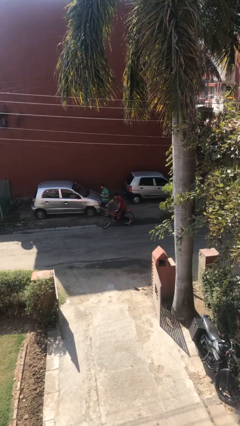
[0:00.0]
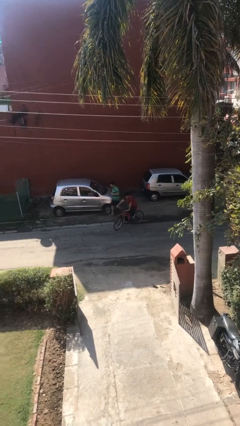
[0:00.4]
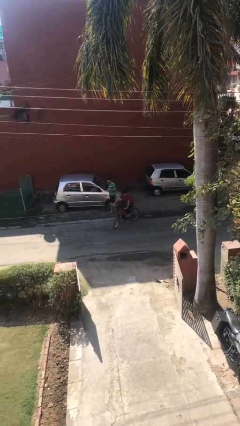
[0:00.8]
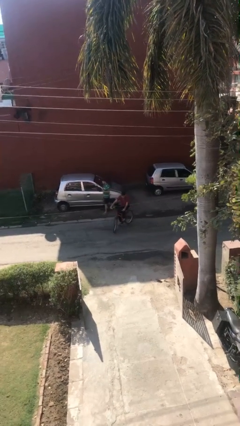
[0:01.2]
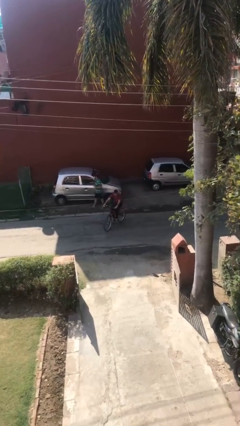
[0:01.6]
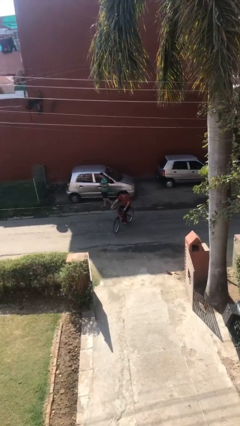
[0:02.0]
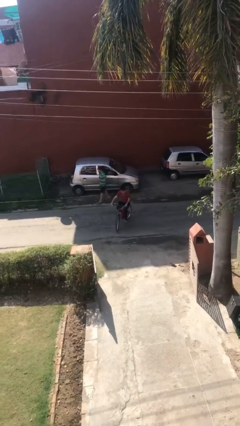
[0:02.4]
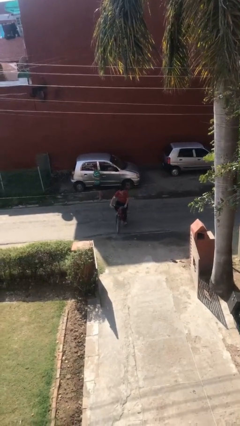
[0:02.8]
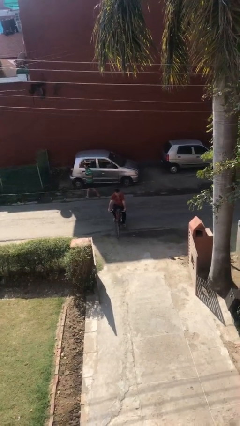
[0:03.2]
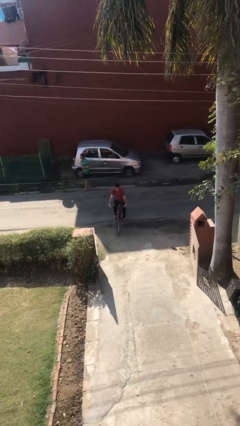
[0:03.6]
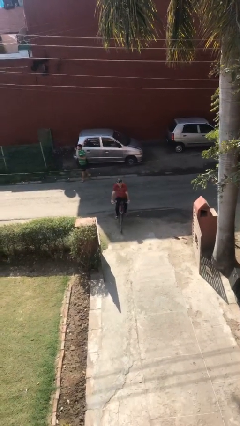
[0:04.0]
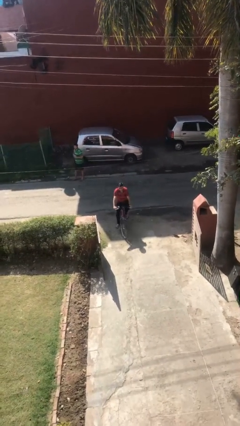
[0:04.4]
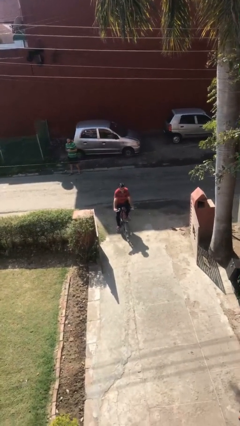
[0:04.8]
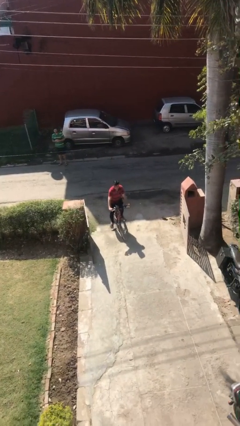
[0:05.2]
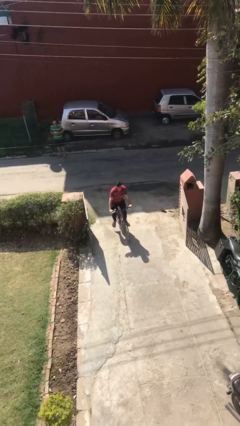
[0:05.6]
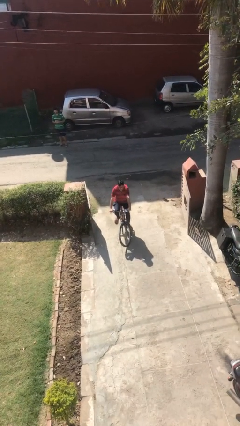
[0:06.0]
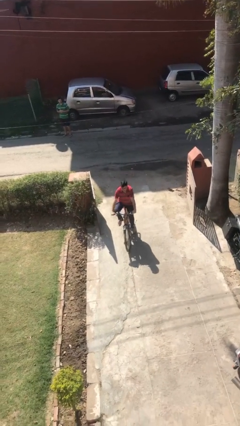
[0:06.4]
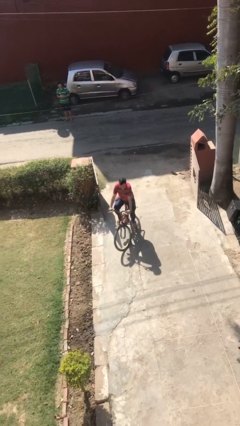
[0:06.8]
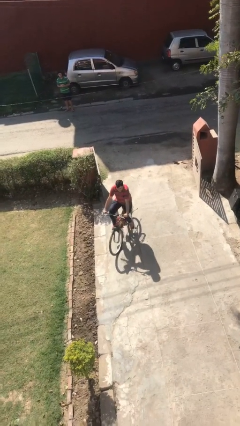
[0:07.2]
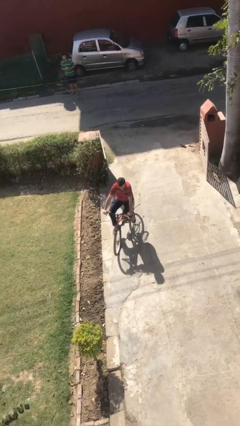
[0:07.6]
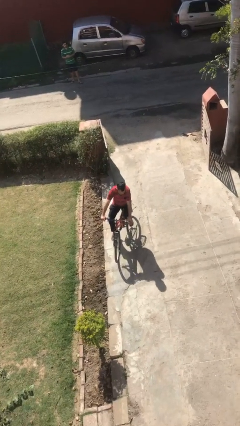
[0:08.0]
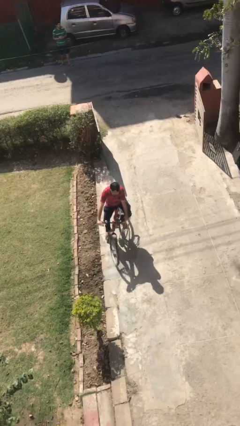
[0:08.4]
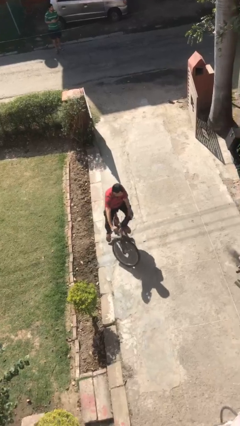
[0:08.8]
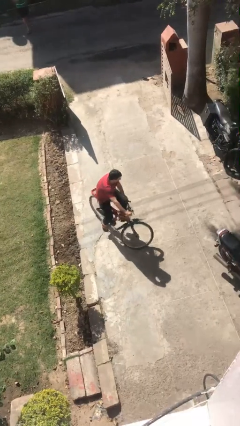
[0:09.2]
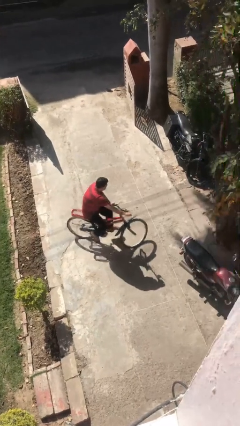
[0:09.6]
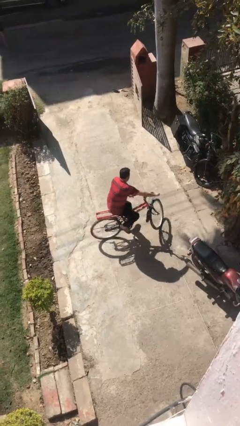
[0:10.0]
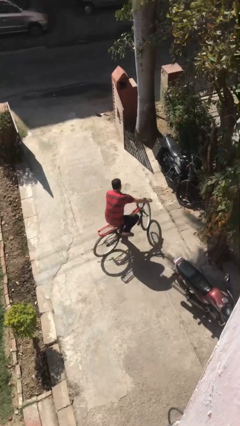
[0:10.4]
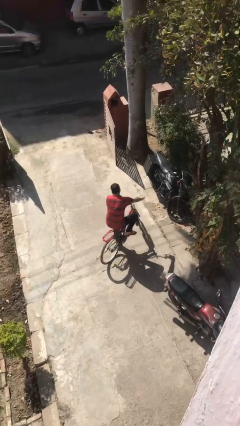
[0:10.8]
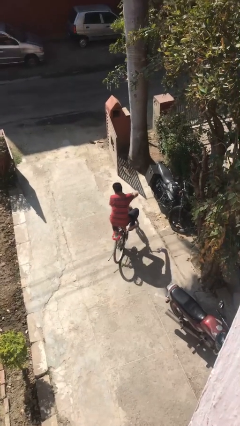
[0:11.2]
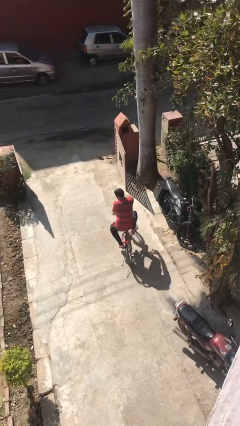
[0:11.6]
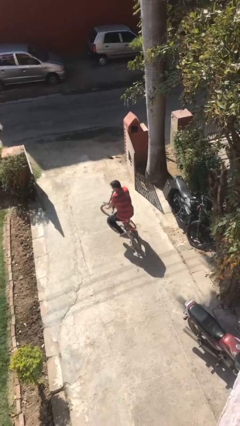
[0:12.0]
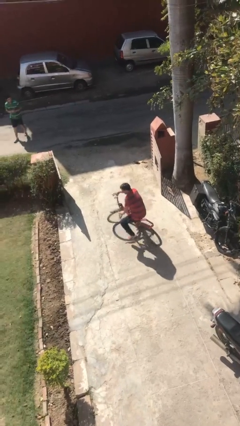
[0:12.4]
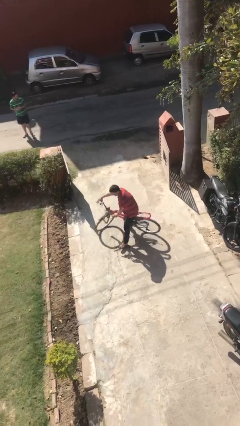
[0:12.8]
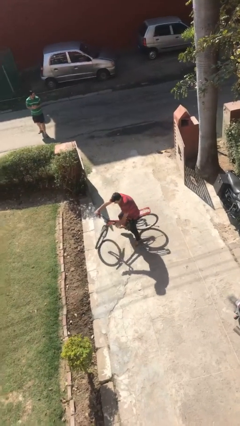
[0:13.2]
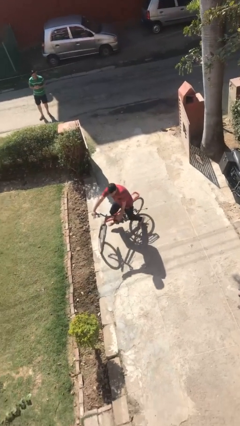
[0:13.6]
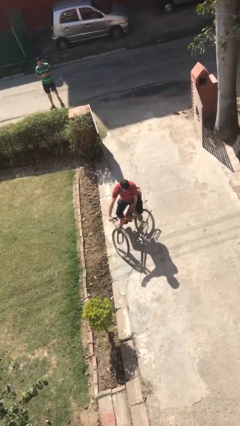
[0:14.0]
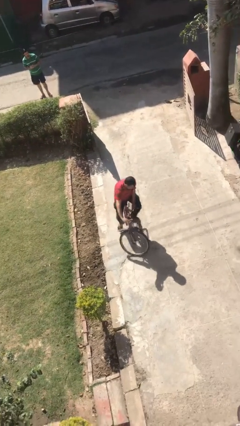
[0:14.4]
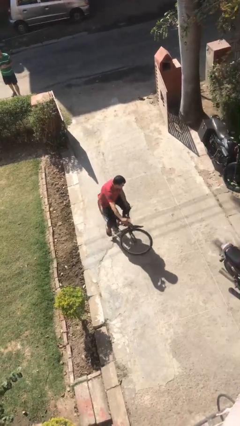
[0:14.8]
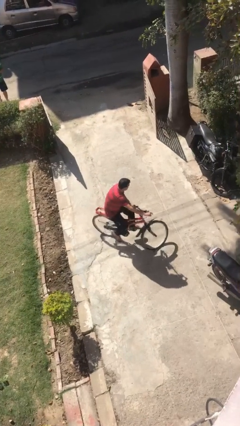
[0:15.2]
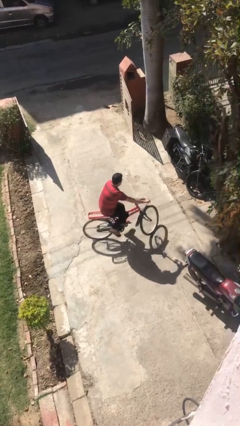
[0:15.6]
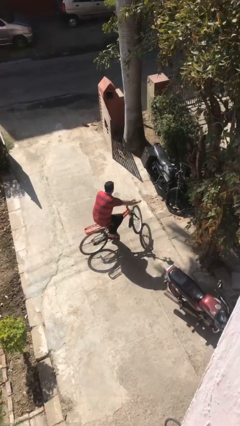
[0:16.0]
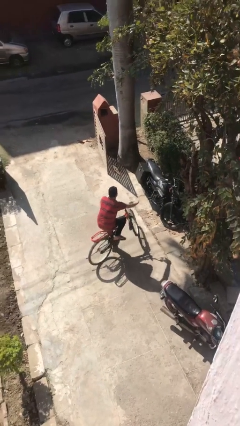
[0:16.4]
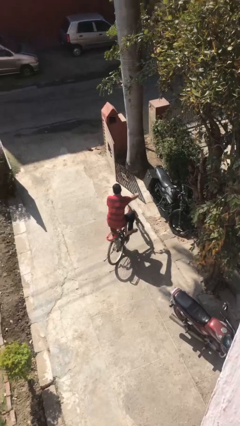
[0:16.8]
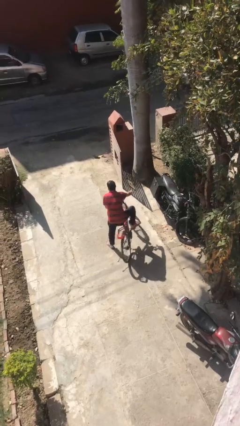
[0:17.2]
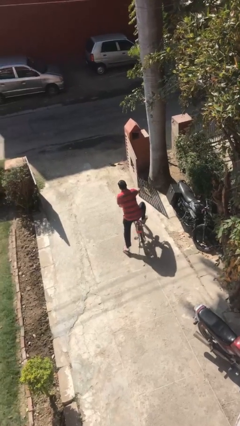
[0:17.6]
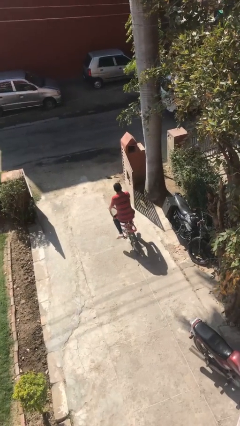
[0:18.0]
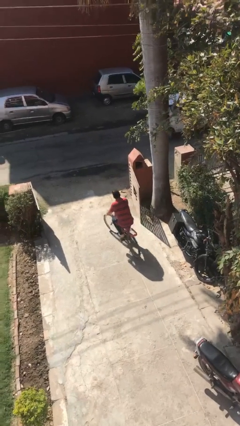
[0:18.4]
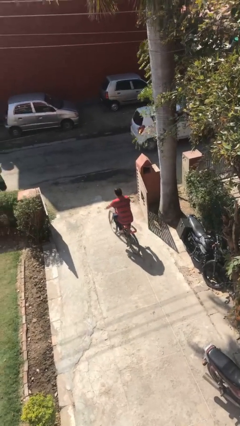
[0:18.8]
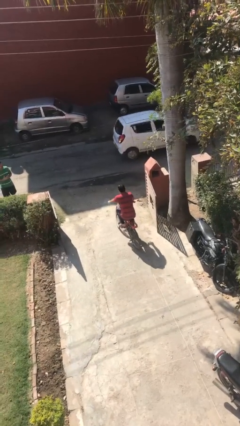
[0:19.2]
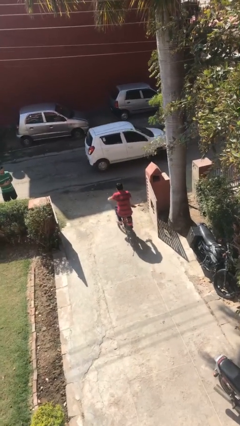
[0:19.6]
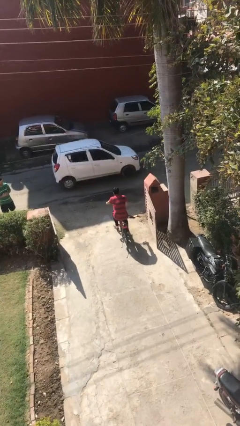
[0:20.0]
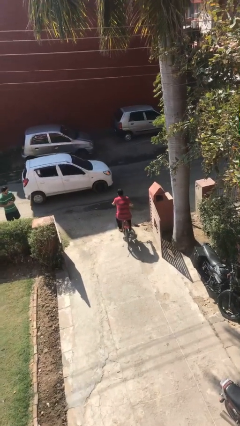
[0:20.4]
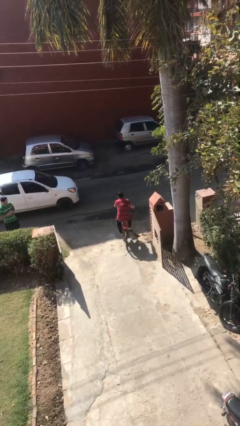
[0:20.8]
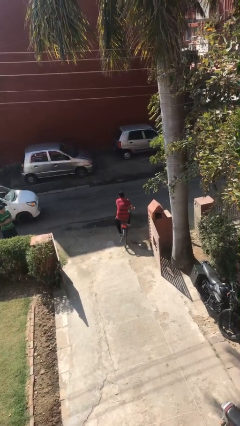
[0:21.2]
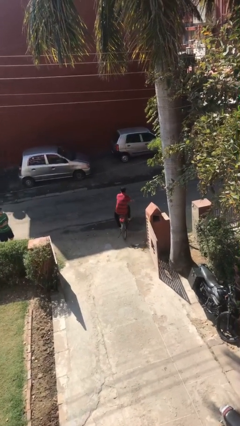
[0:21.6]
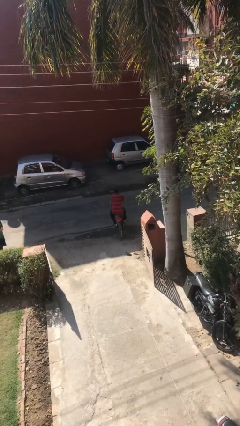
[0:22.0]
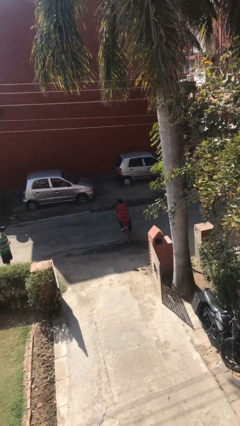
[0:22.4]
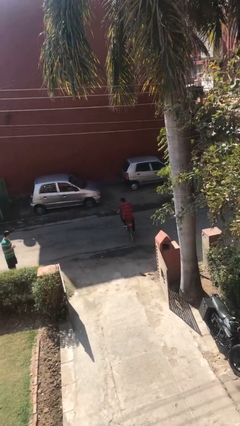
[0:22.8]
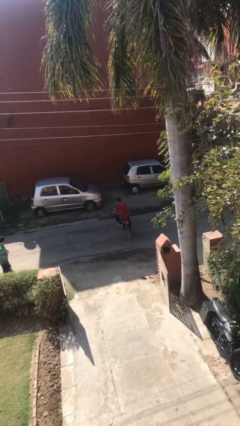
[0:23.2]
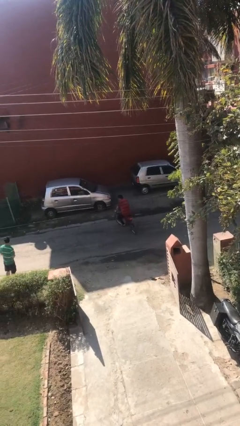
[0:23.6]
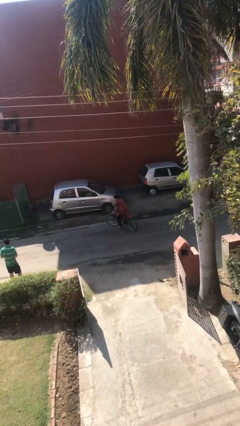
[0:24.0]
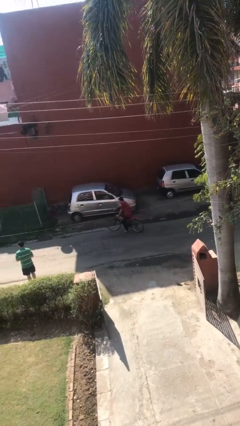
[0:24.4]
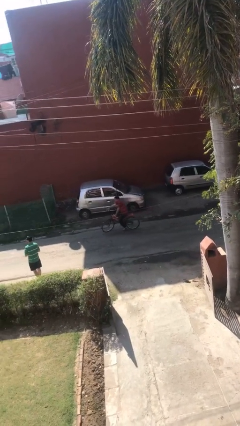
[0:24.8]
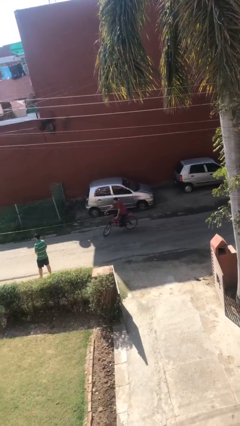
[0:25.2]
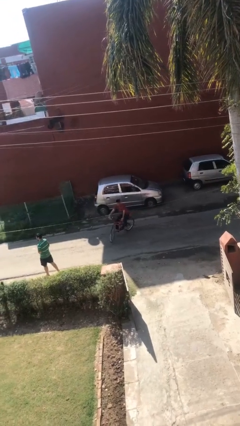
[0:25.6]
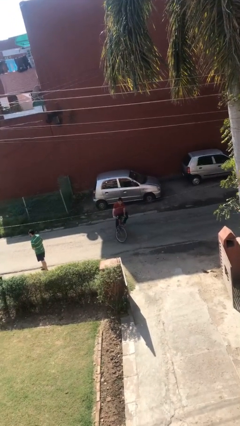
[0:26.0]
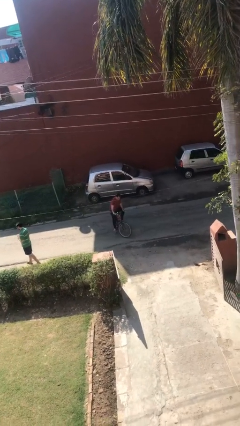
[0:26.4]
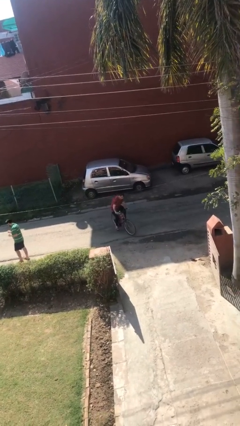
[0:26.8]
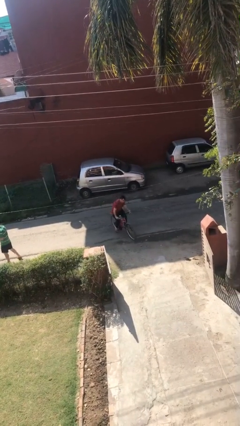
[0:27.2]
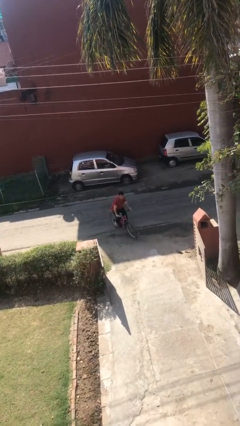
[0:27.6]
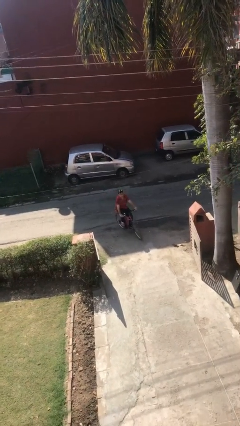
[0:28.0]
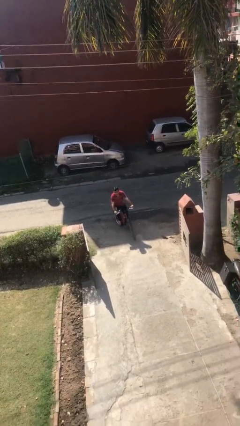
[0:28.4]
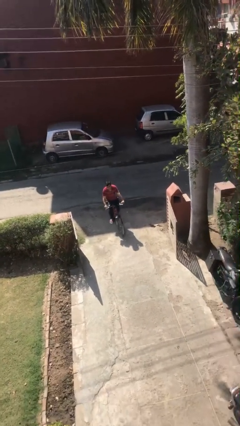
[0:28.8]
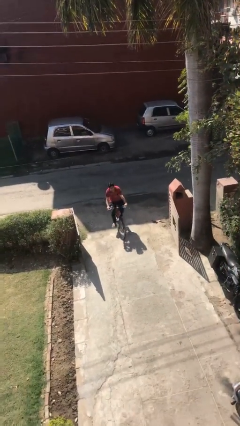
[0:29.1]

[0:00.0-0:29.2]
person rides bicycle

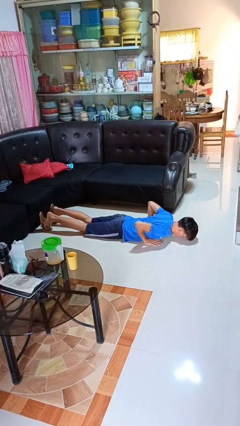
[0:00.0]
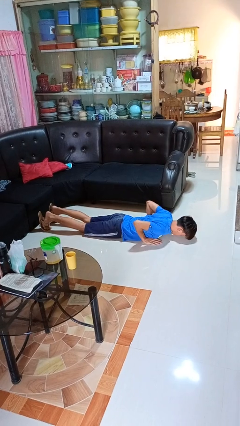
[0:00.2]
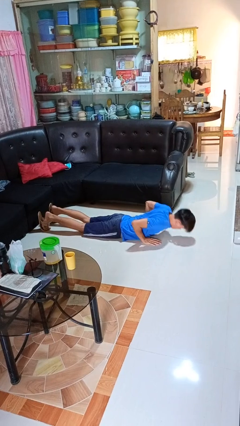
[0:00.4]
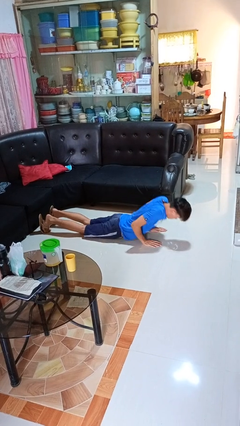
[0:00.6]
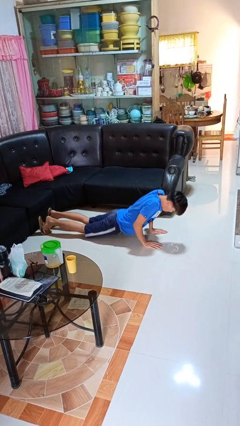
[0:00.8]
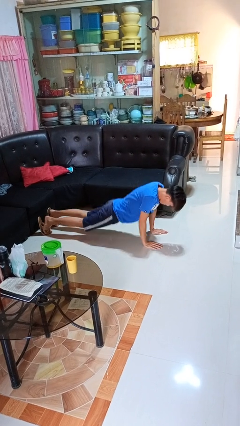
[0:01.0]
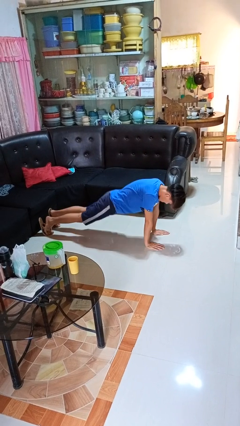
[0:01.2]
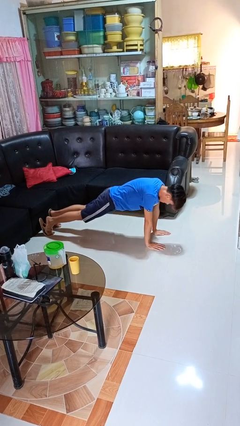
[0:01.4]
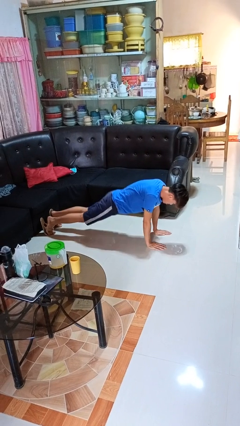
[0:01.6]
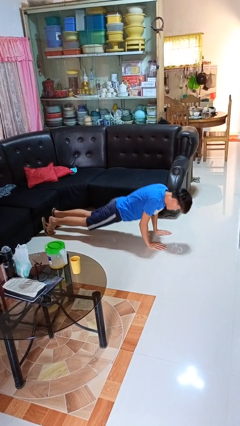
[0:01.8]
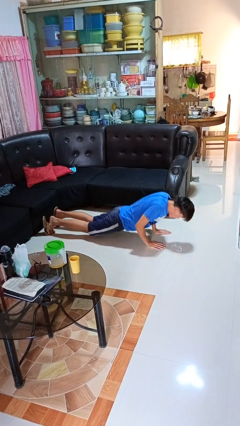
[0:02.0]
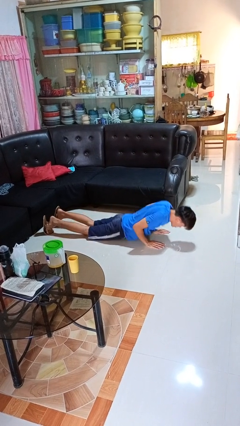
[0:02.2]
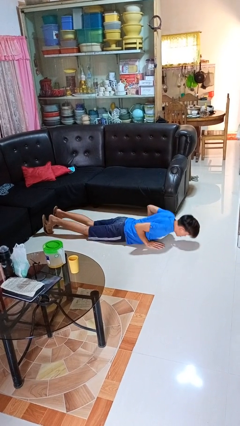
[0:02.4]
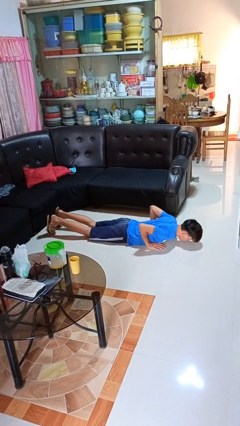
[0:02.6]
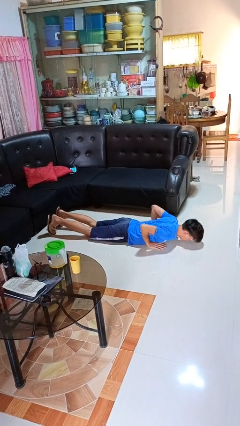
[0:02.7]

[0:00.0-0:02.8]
person exercises with pushup

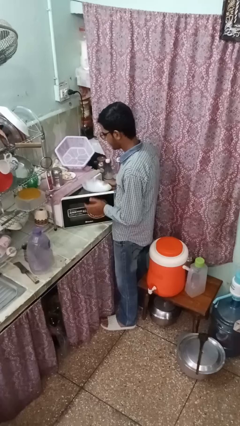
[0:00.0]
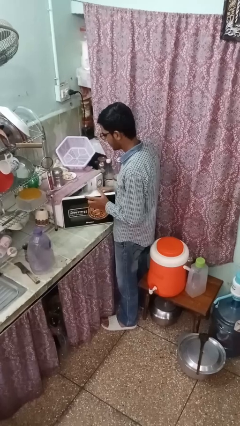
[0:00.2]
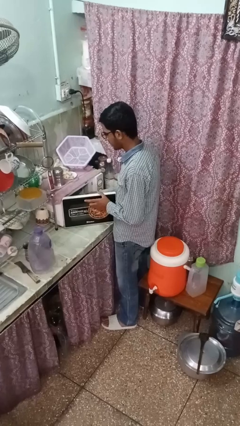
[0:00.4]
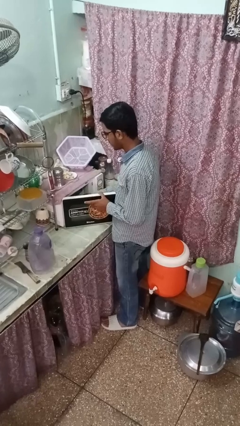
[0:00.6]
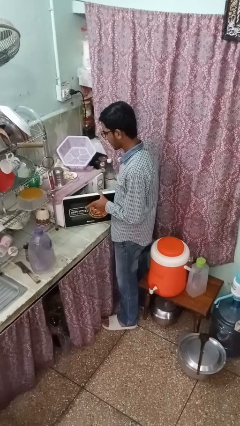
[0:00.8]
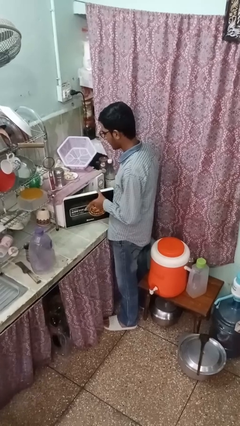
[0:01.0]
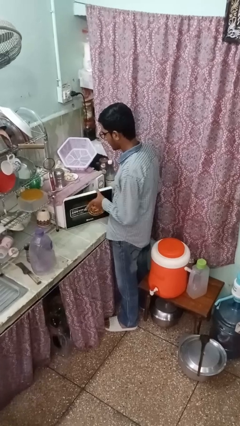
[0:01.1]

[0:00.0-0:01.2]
person puts object into oven
